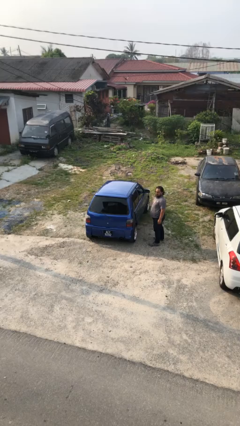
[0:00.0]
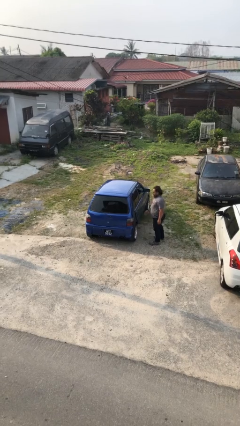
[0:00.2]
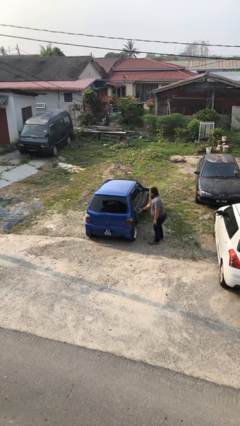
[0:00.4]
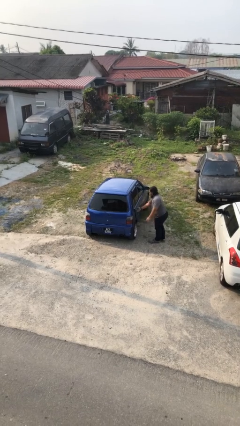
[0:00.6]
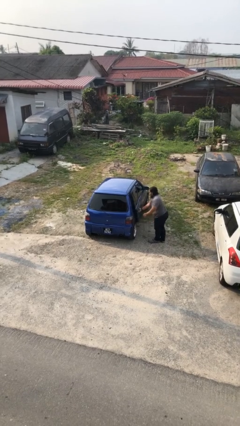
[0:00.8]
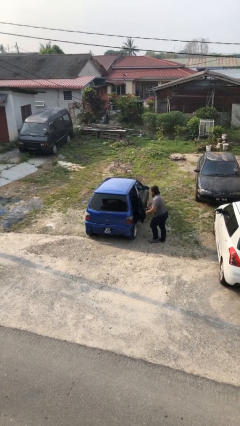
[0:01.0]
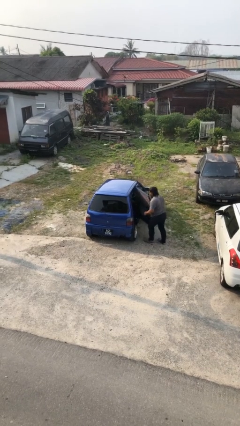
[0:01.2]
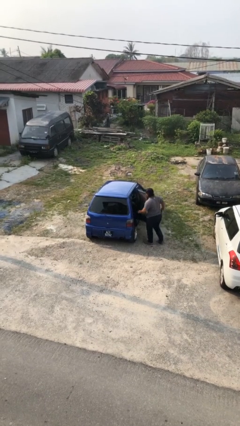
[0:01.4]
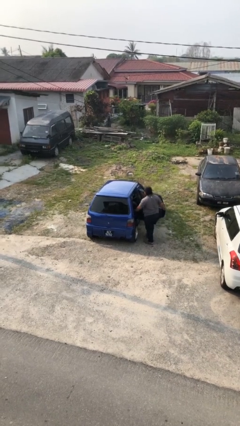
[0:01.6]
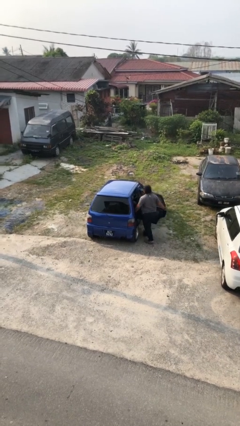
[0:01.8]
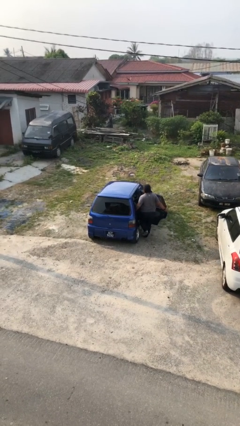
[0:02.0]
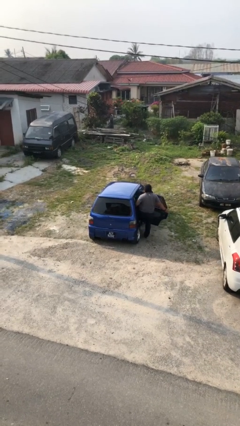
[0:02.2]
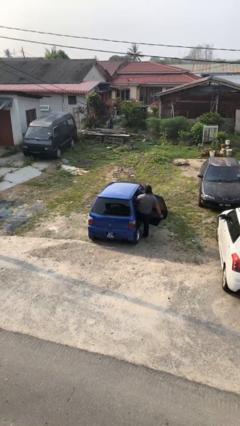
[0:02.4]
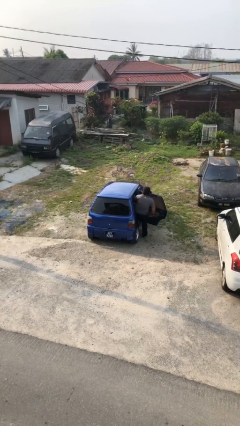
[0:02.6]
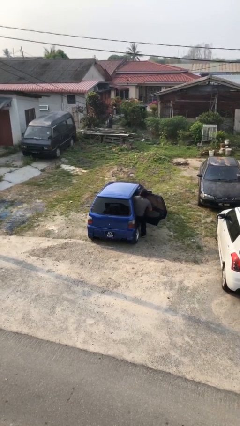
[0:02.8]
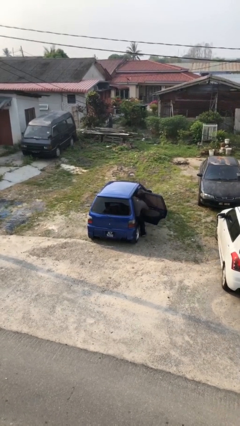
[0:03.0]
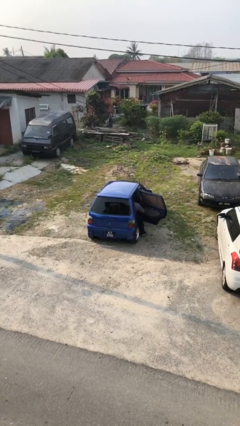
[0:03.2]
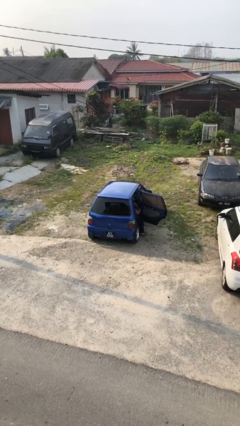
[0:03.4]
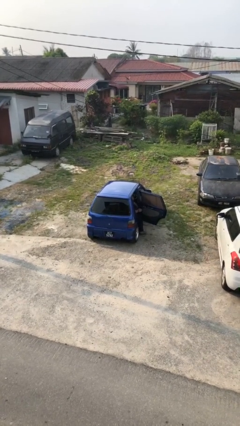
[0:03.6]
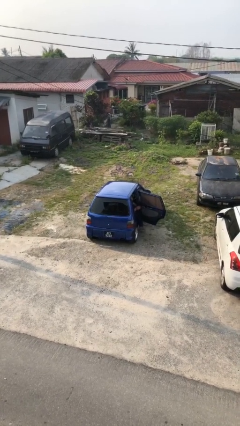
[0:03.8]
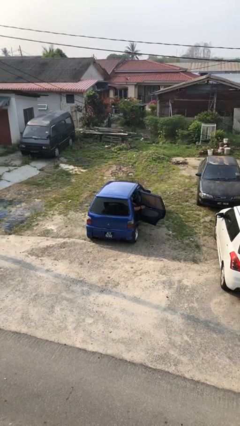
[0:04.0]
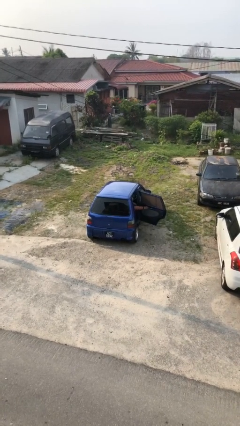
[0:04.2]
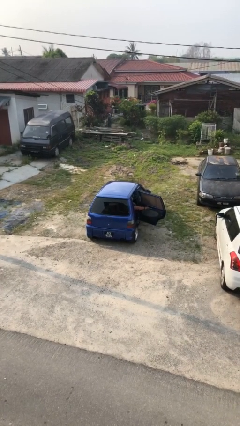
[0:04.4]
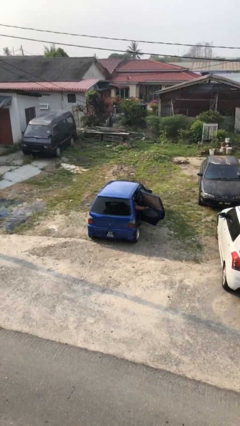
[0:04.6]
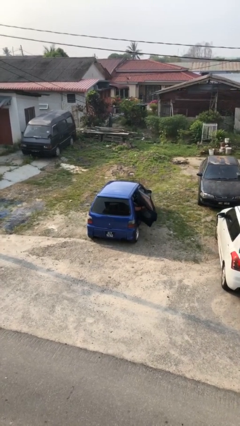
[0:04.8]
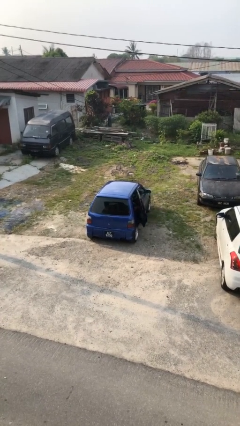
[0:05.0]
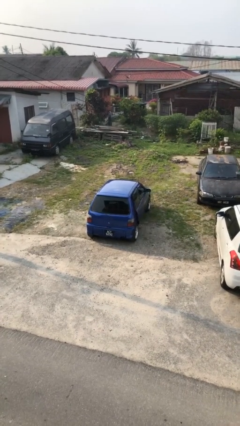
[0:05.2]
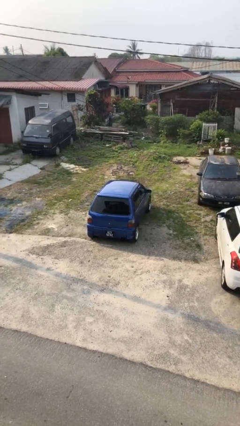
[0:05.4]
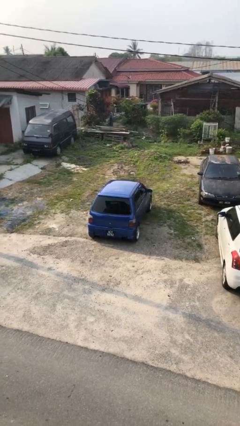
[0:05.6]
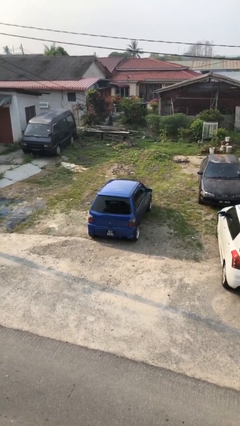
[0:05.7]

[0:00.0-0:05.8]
car picks up person

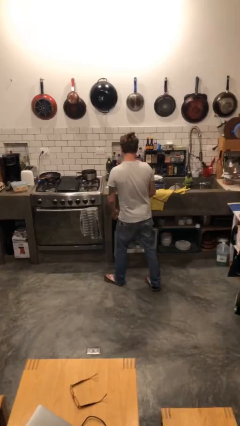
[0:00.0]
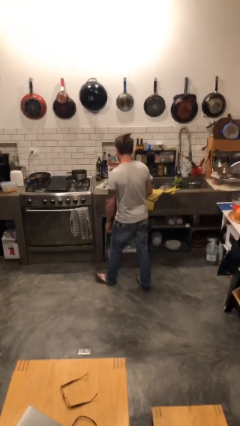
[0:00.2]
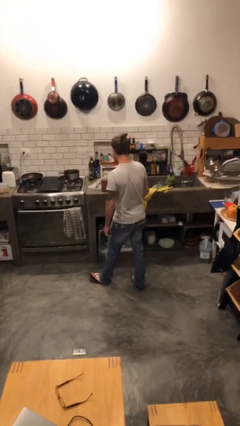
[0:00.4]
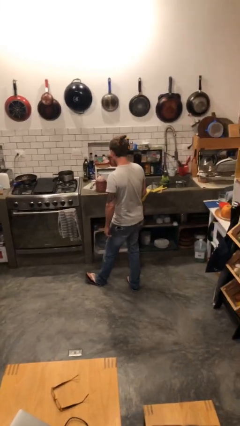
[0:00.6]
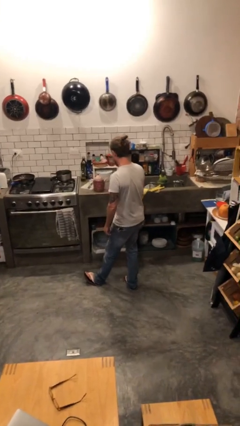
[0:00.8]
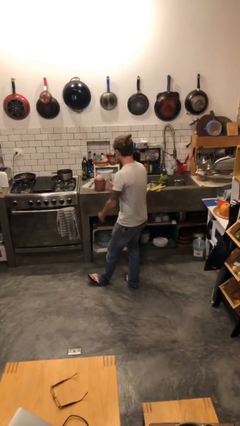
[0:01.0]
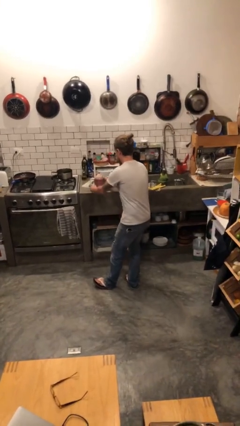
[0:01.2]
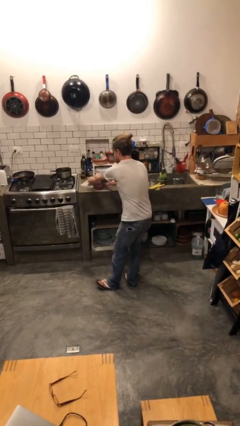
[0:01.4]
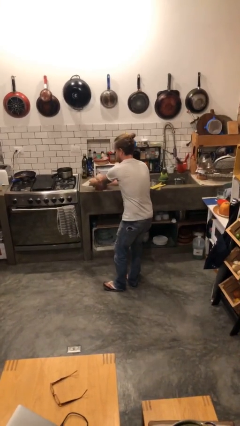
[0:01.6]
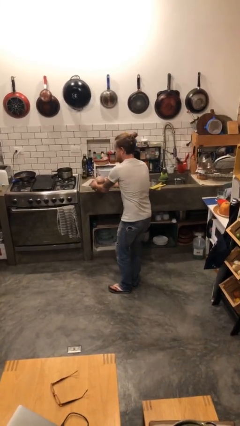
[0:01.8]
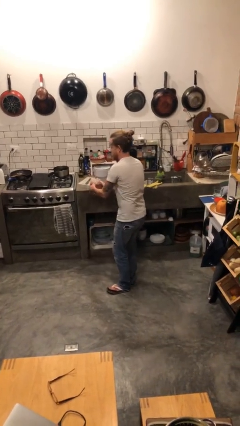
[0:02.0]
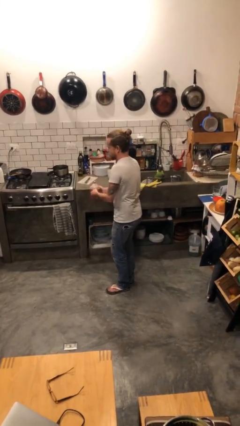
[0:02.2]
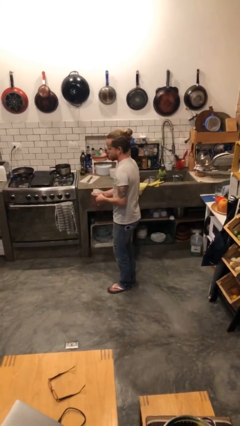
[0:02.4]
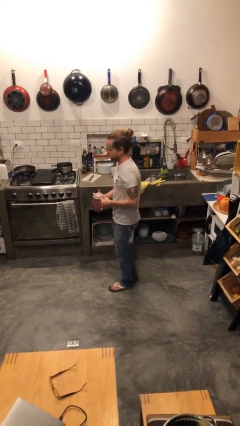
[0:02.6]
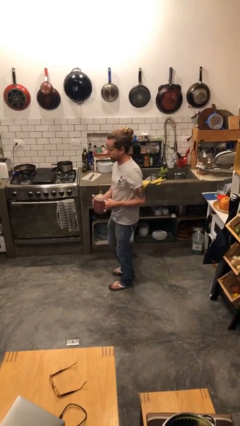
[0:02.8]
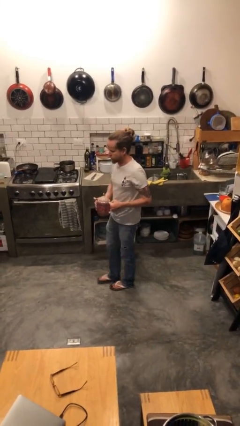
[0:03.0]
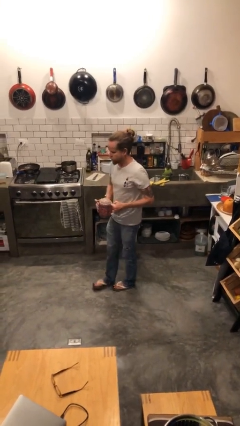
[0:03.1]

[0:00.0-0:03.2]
person picks up object from countertop

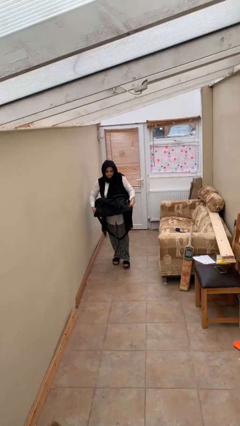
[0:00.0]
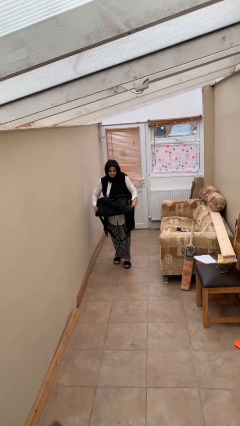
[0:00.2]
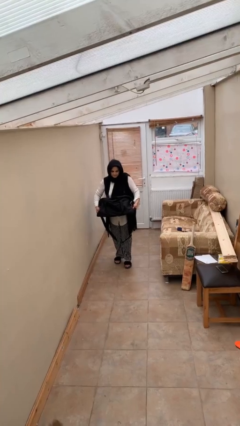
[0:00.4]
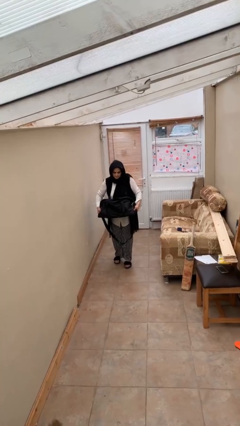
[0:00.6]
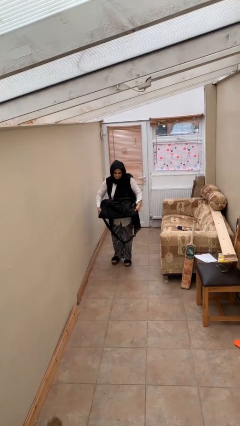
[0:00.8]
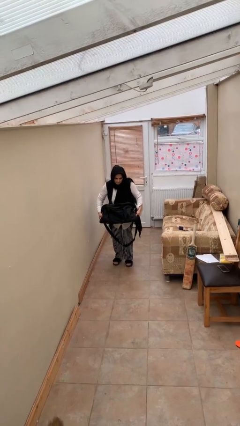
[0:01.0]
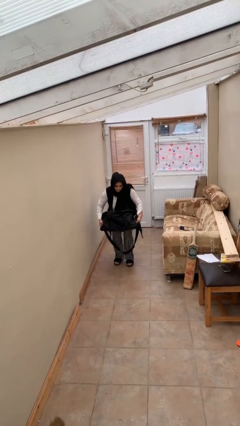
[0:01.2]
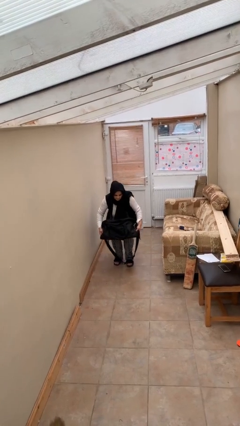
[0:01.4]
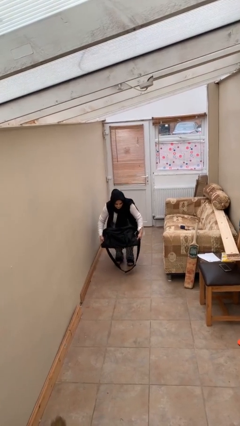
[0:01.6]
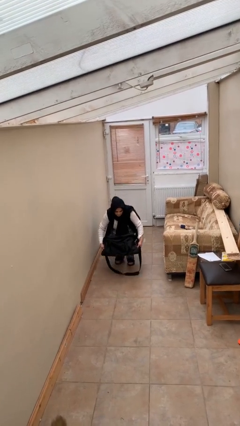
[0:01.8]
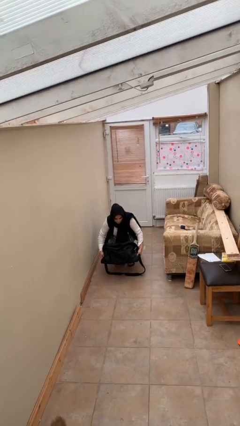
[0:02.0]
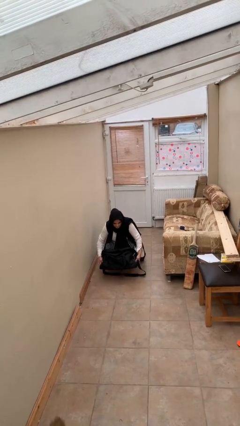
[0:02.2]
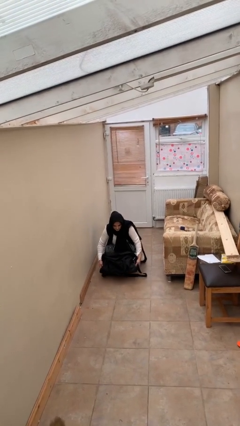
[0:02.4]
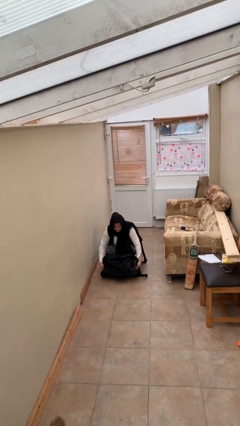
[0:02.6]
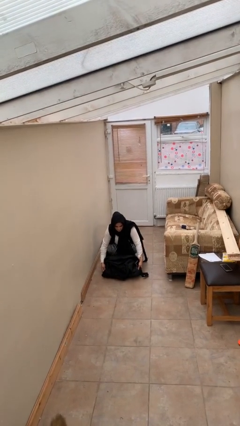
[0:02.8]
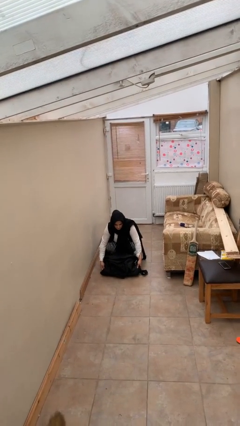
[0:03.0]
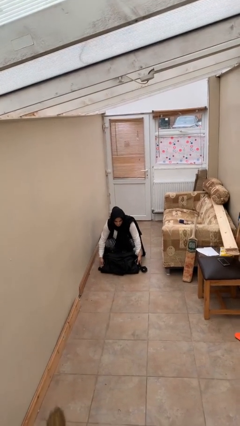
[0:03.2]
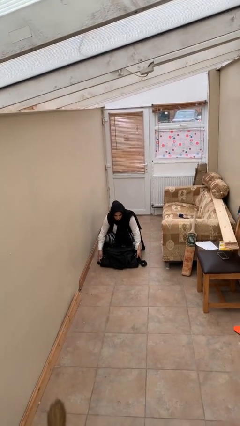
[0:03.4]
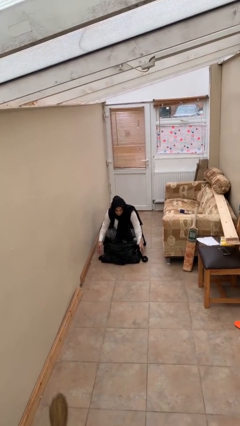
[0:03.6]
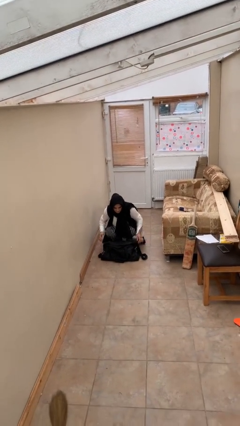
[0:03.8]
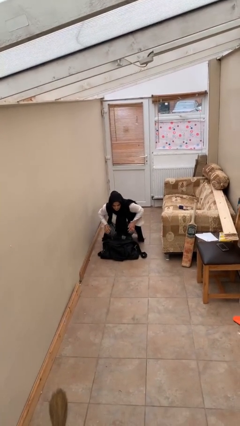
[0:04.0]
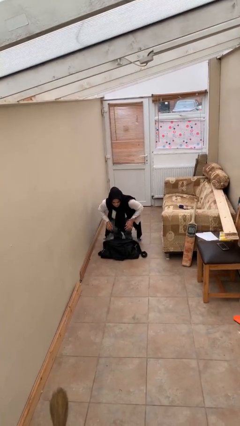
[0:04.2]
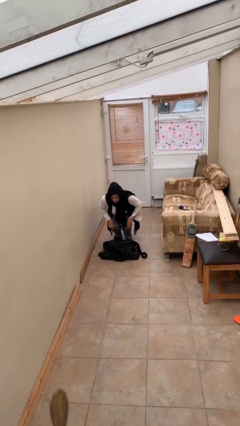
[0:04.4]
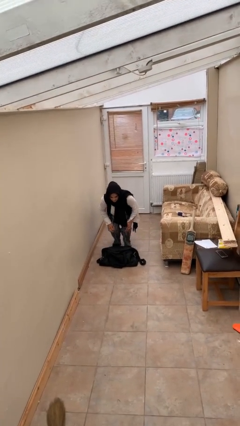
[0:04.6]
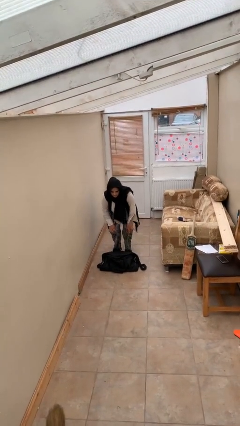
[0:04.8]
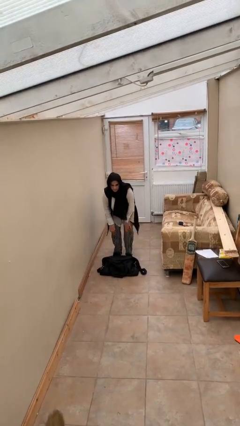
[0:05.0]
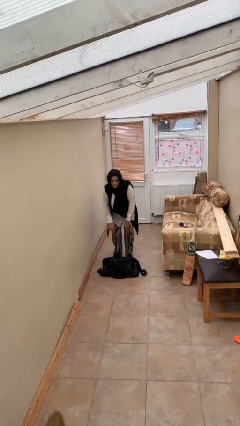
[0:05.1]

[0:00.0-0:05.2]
person puts down object on floor

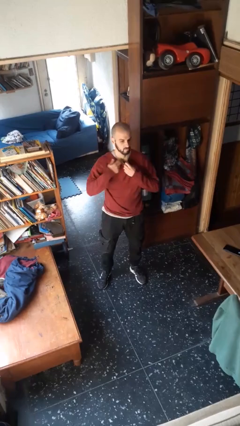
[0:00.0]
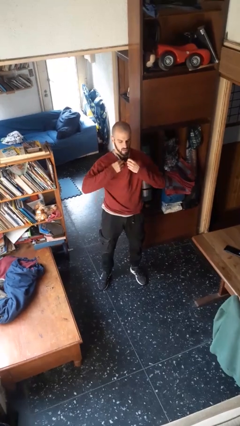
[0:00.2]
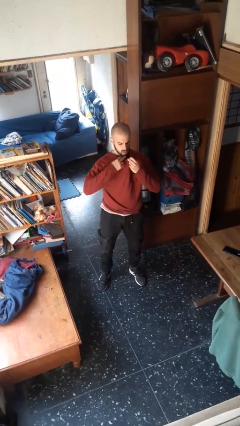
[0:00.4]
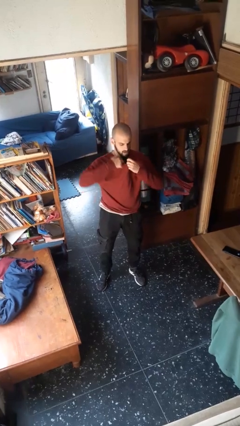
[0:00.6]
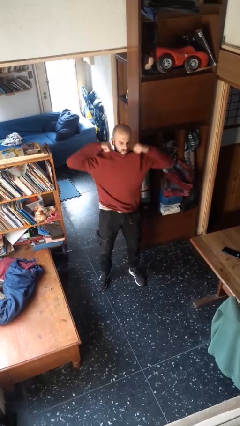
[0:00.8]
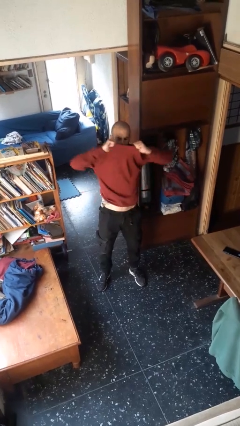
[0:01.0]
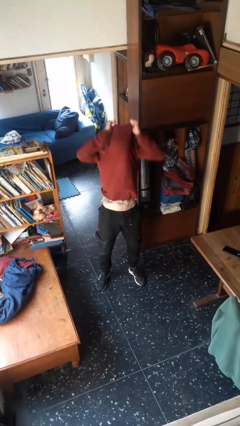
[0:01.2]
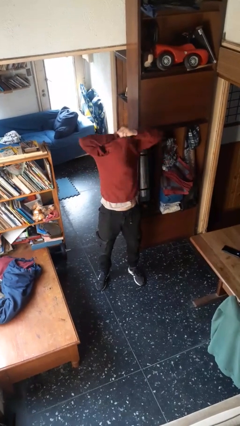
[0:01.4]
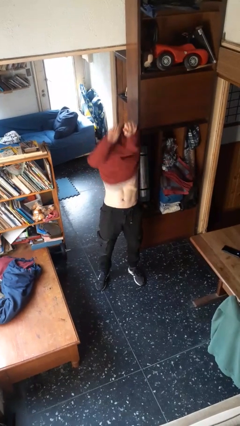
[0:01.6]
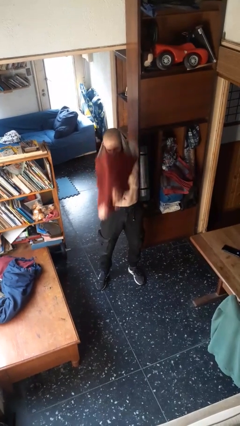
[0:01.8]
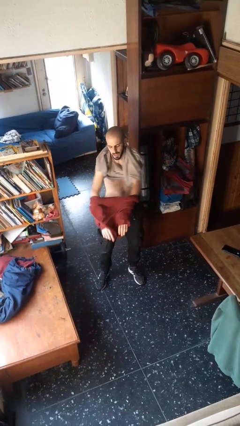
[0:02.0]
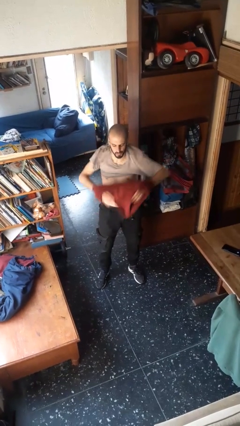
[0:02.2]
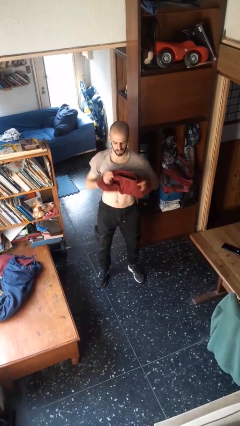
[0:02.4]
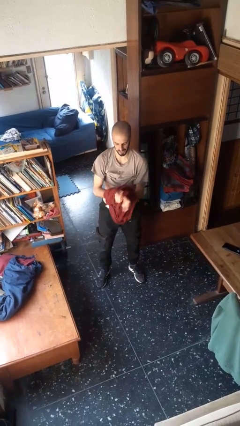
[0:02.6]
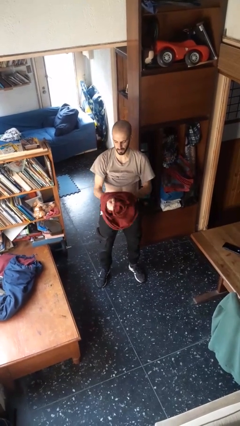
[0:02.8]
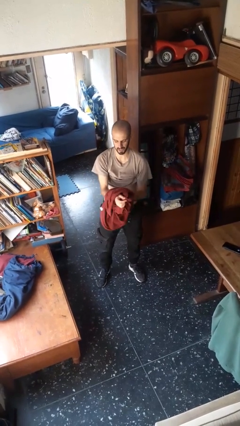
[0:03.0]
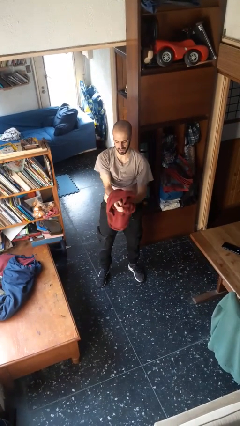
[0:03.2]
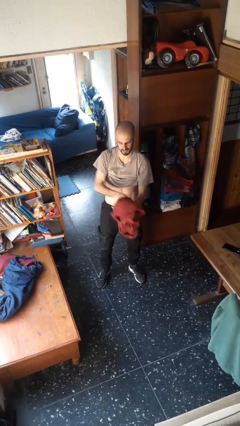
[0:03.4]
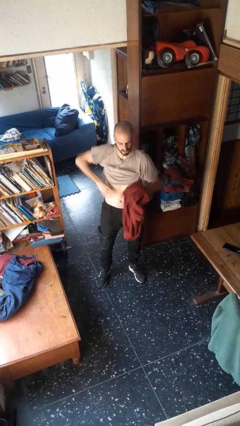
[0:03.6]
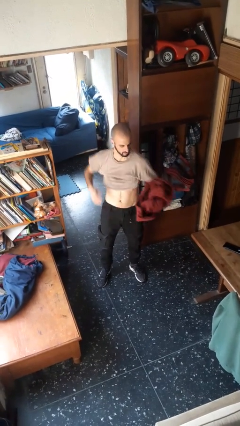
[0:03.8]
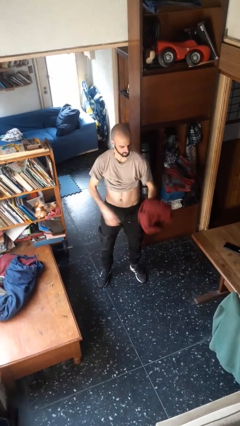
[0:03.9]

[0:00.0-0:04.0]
person takes off shirt
